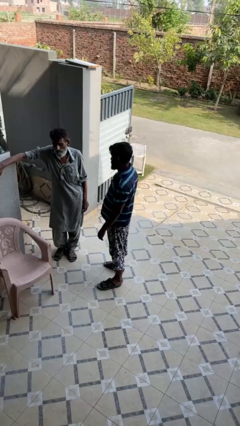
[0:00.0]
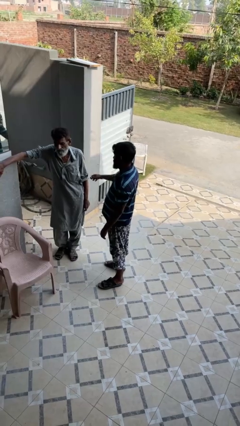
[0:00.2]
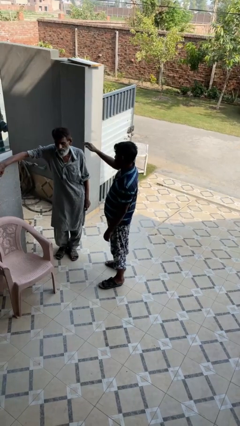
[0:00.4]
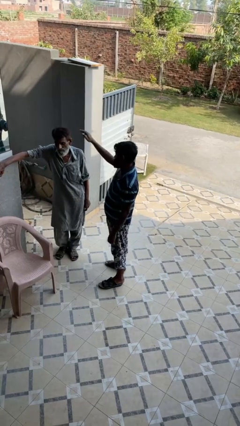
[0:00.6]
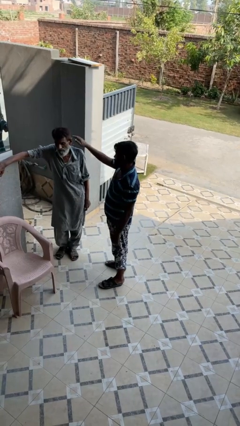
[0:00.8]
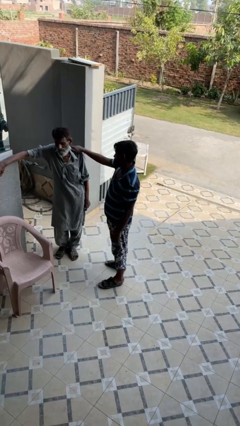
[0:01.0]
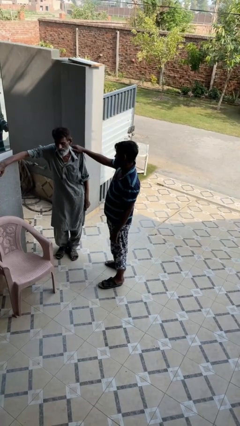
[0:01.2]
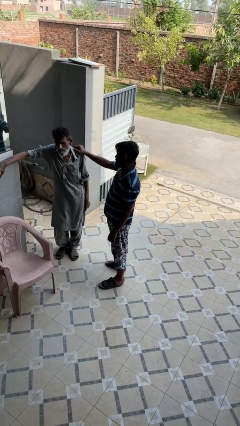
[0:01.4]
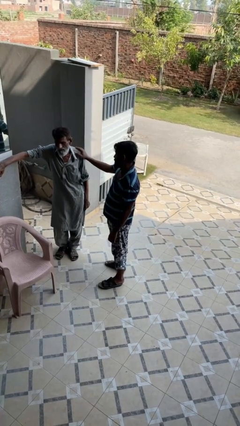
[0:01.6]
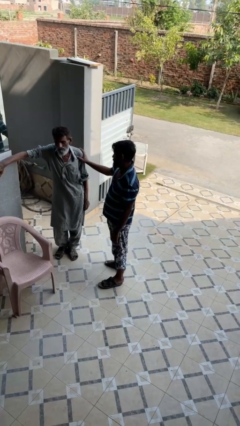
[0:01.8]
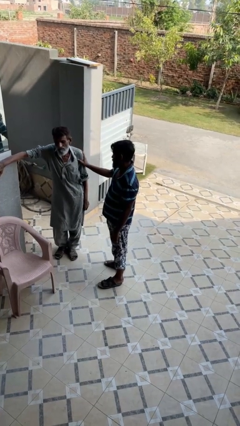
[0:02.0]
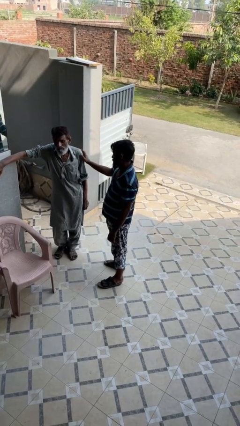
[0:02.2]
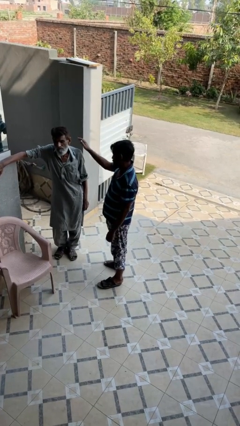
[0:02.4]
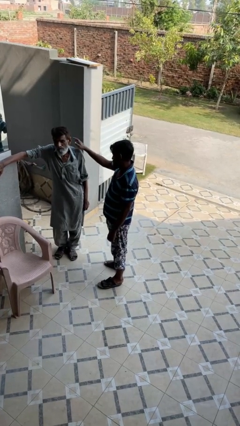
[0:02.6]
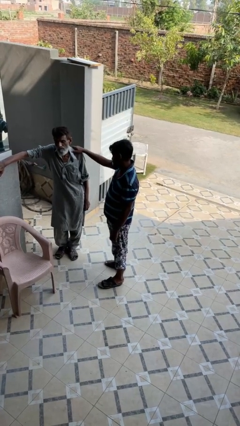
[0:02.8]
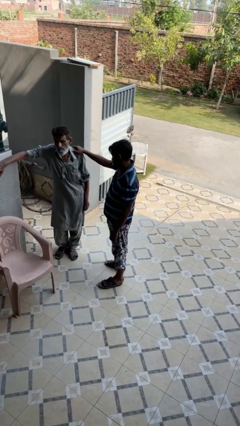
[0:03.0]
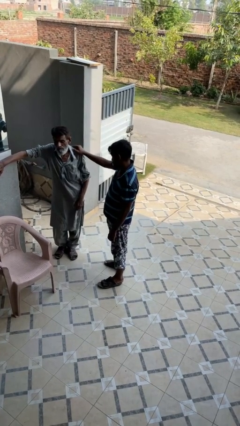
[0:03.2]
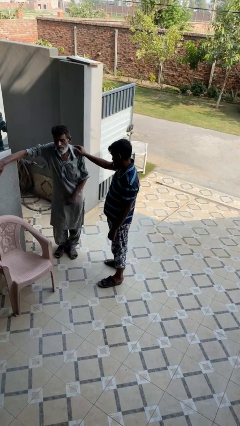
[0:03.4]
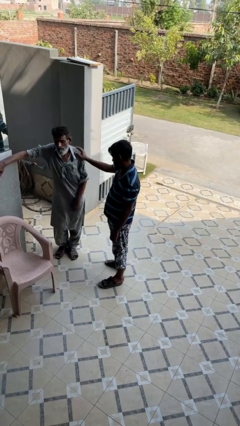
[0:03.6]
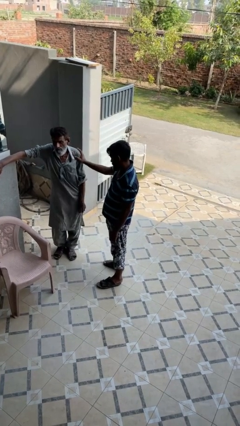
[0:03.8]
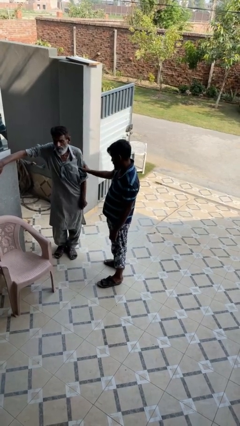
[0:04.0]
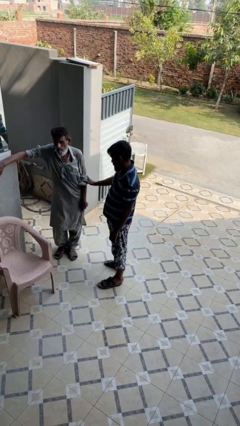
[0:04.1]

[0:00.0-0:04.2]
person pounds shoulders of person

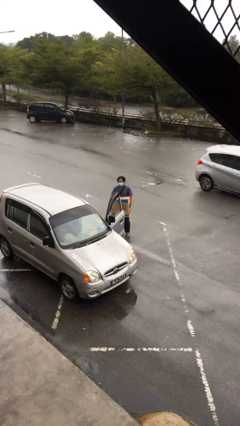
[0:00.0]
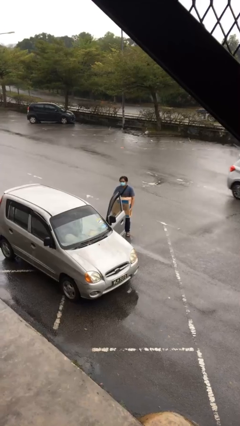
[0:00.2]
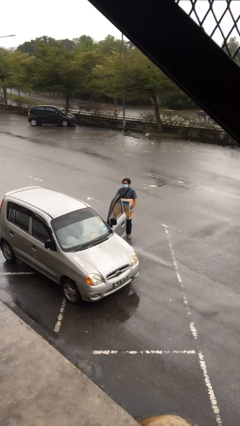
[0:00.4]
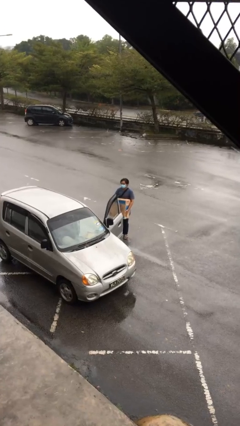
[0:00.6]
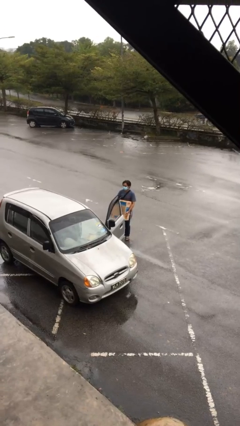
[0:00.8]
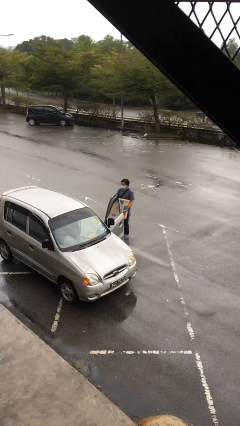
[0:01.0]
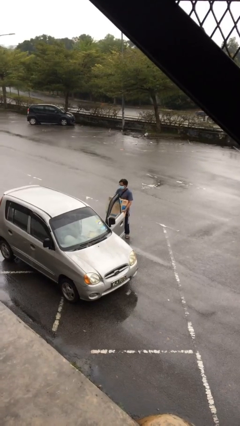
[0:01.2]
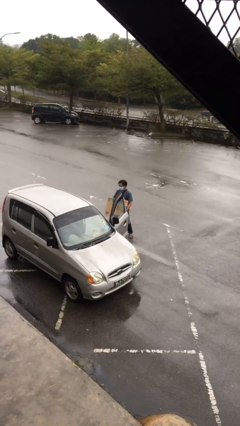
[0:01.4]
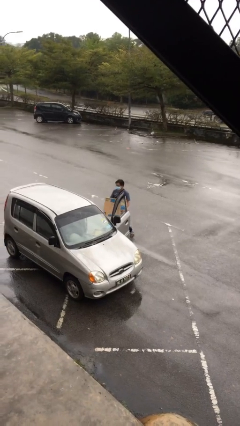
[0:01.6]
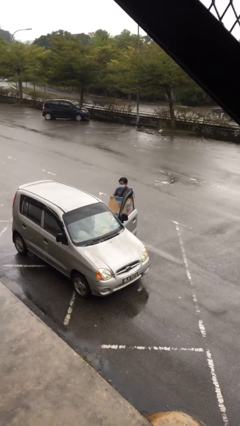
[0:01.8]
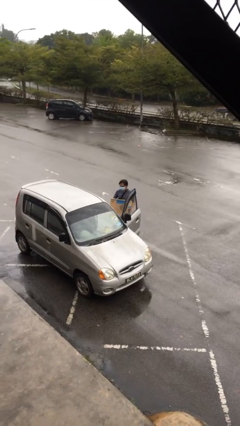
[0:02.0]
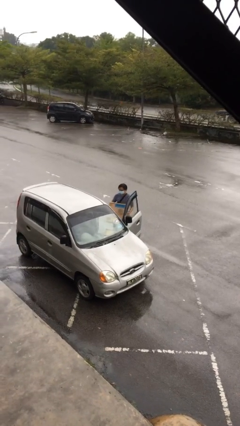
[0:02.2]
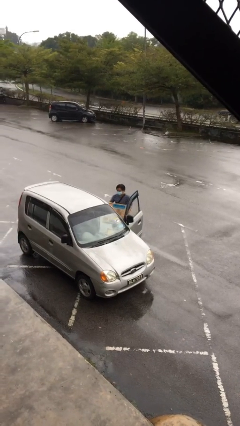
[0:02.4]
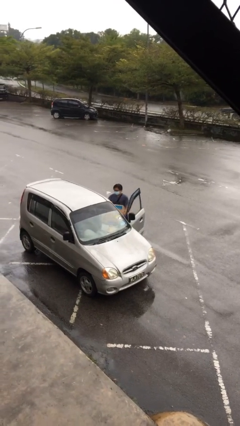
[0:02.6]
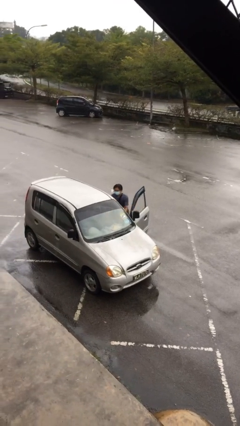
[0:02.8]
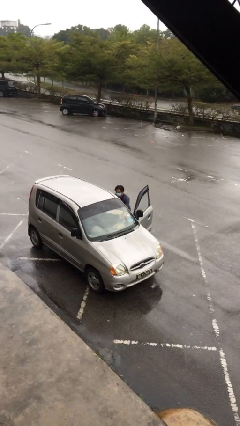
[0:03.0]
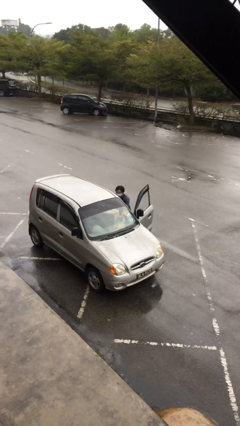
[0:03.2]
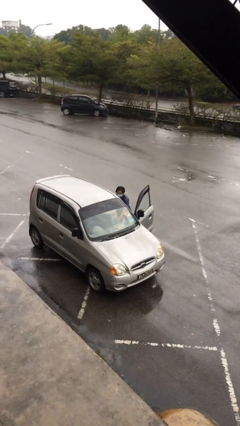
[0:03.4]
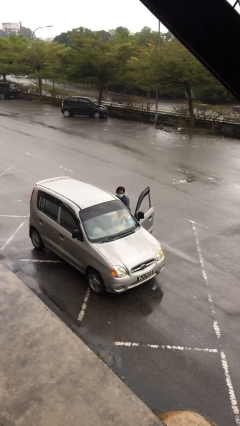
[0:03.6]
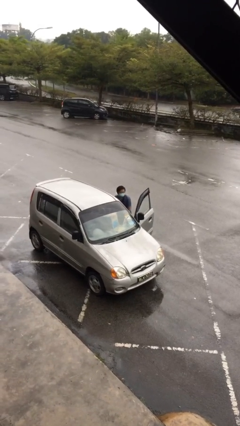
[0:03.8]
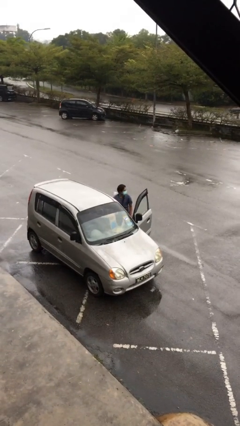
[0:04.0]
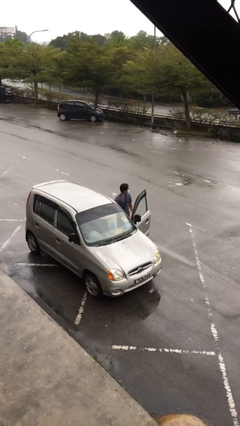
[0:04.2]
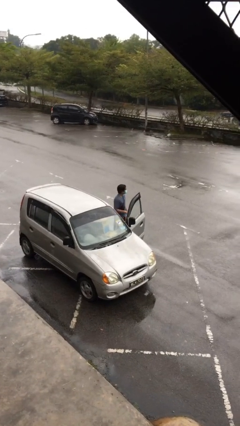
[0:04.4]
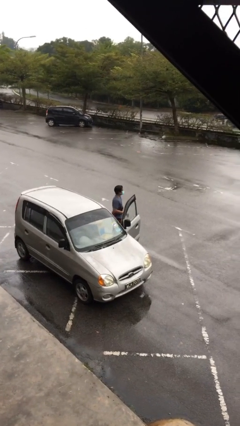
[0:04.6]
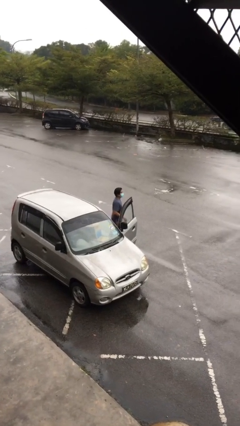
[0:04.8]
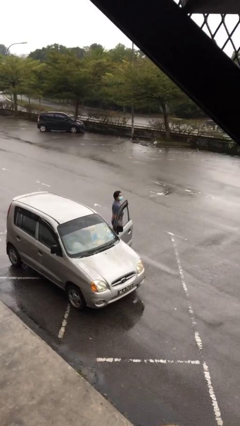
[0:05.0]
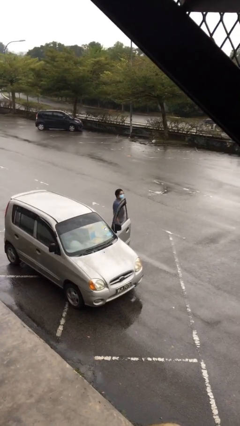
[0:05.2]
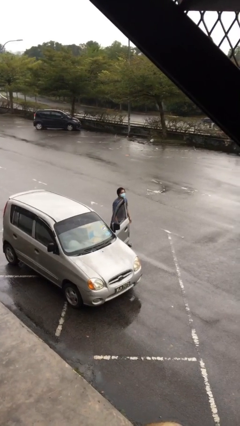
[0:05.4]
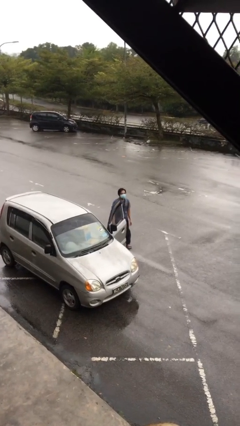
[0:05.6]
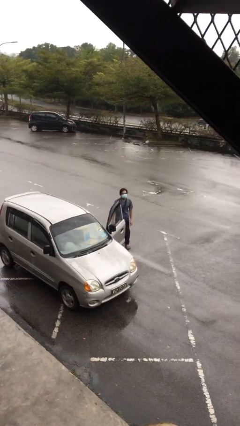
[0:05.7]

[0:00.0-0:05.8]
person loads car

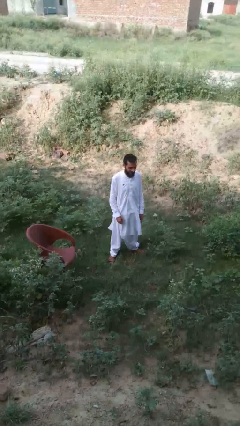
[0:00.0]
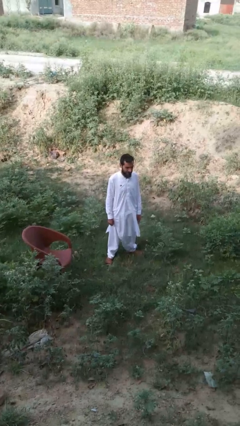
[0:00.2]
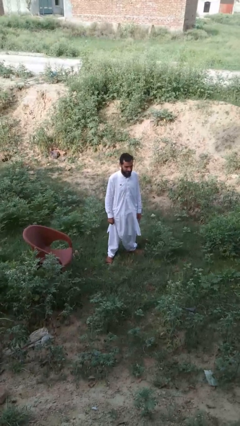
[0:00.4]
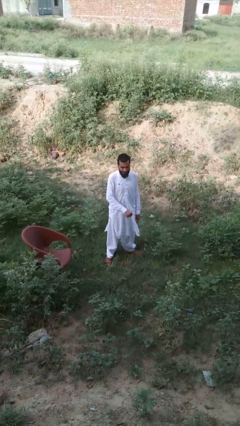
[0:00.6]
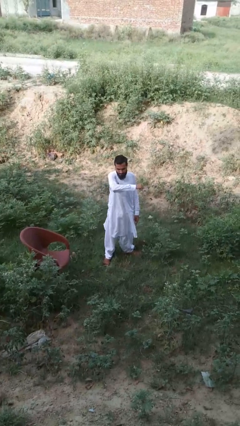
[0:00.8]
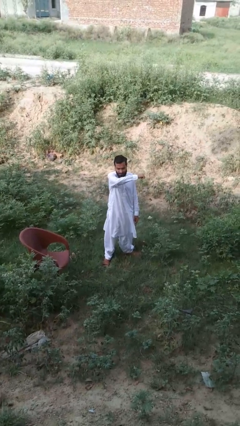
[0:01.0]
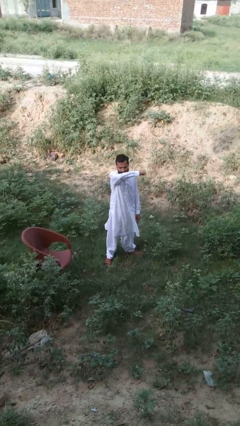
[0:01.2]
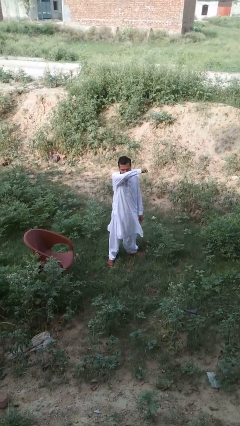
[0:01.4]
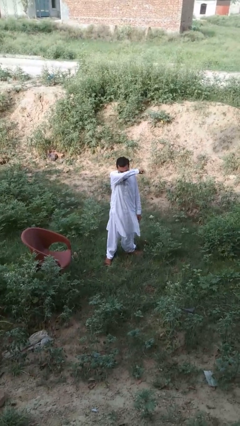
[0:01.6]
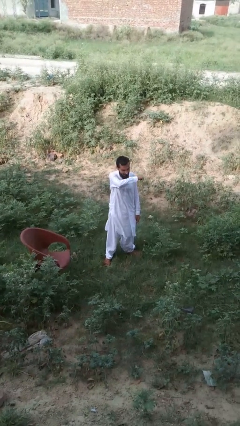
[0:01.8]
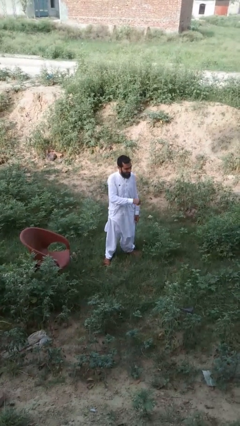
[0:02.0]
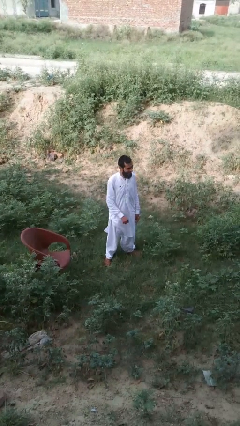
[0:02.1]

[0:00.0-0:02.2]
person sneezes into arm

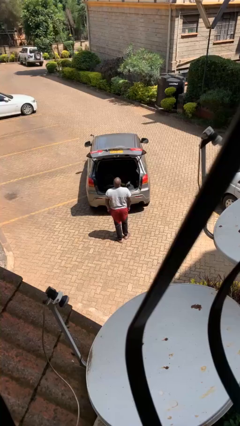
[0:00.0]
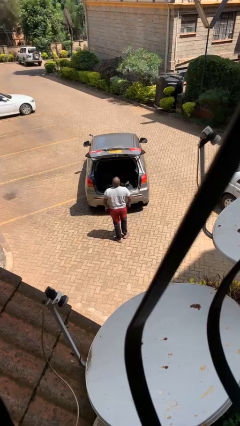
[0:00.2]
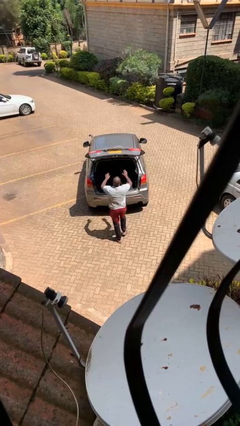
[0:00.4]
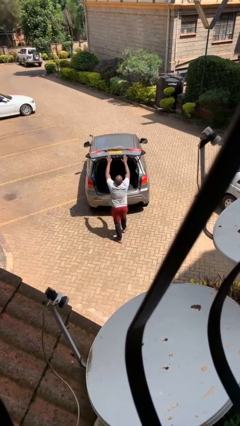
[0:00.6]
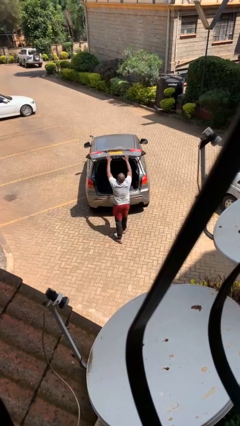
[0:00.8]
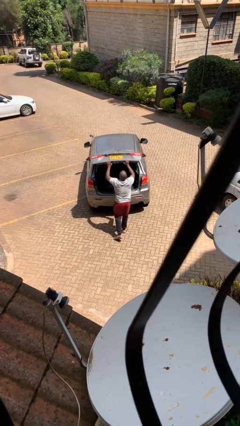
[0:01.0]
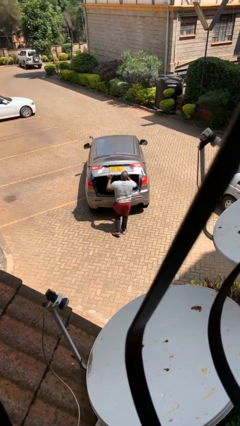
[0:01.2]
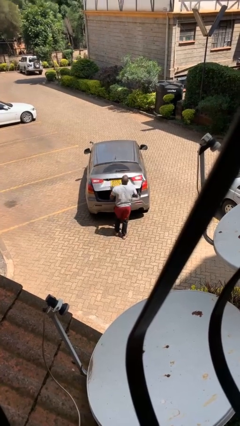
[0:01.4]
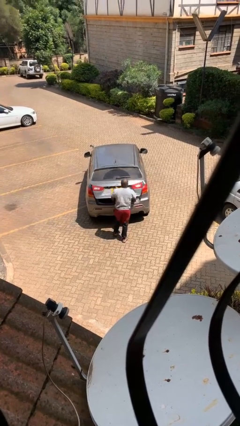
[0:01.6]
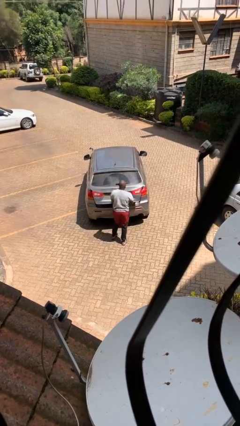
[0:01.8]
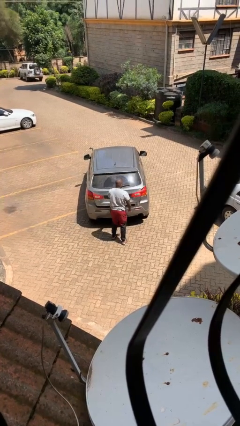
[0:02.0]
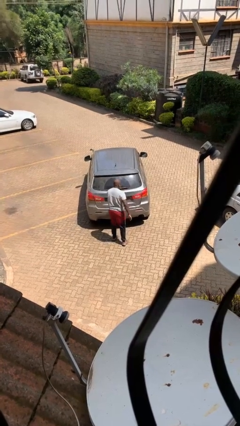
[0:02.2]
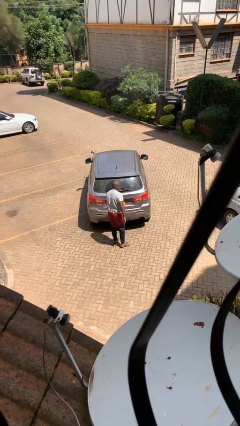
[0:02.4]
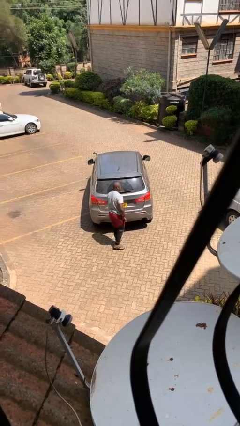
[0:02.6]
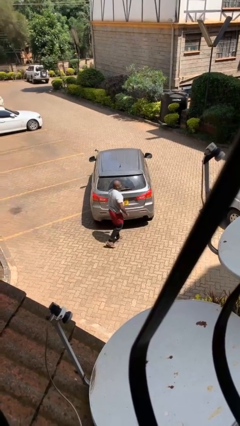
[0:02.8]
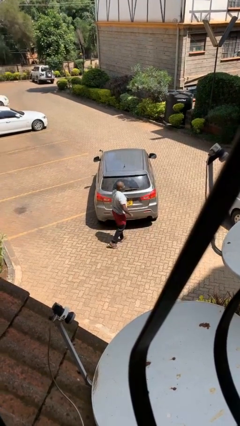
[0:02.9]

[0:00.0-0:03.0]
person closes car trunk

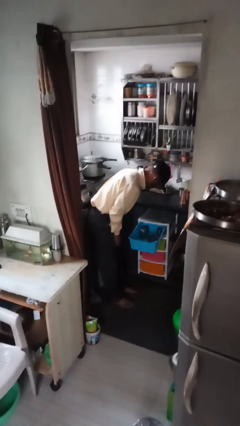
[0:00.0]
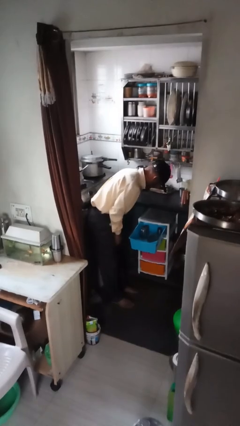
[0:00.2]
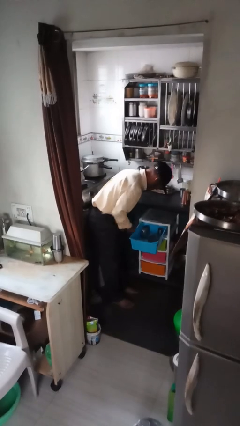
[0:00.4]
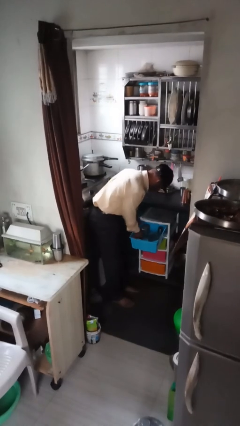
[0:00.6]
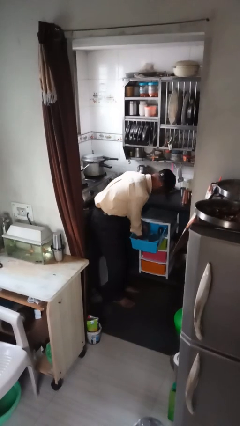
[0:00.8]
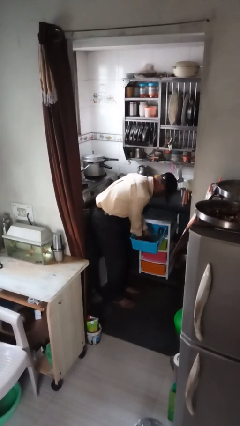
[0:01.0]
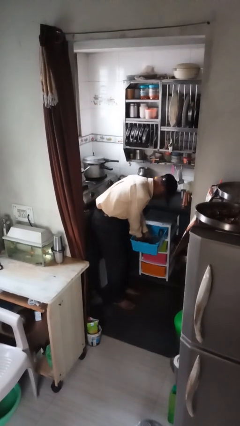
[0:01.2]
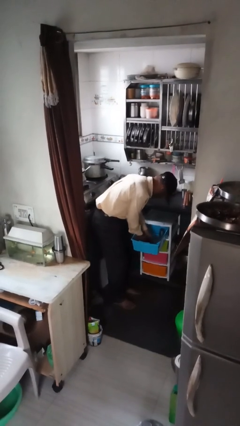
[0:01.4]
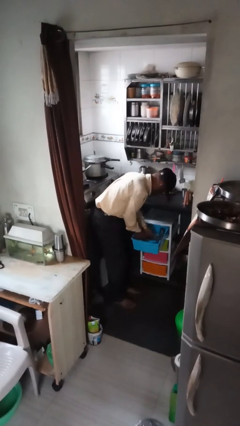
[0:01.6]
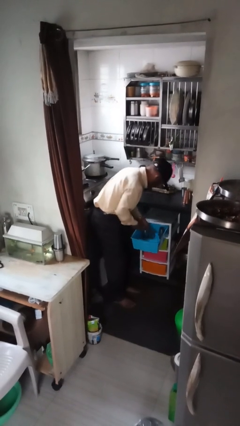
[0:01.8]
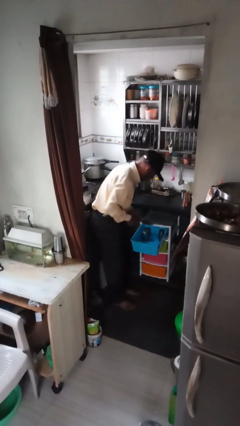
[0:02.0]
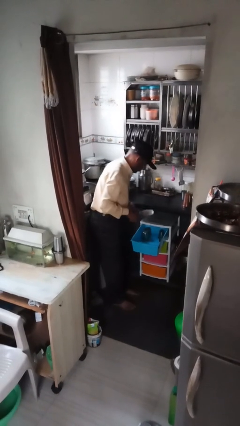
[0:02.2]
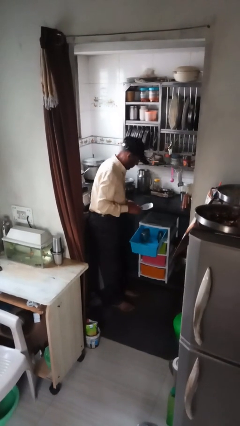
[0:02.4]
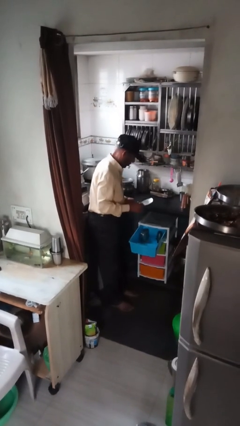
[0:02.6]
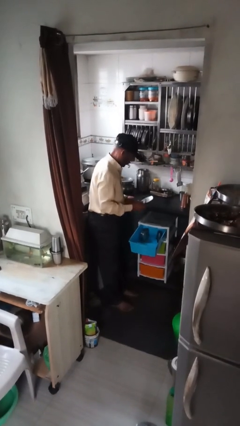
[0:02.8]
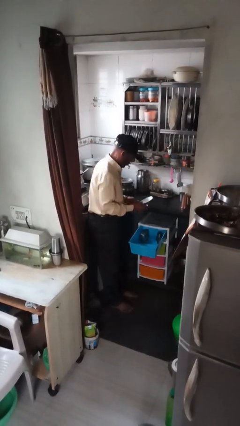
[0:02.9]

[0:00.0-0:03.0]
person takes object from kitchen drawer
